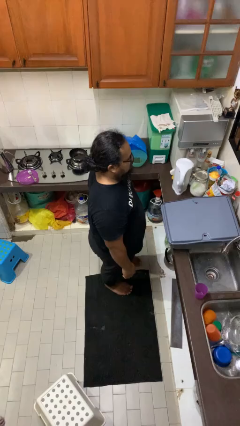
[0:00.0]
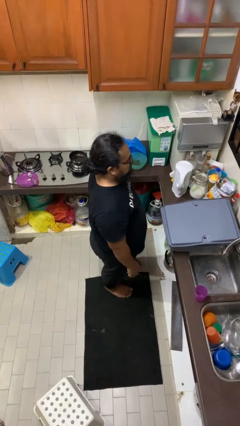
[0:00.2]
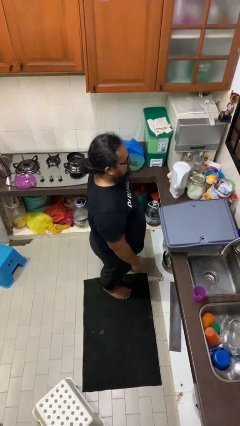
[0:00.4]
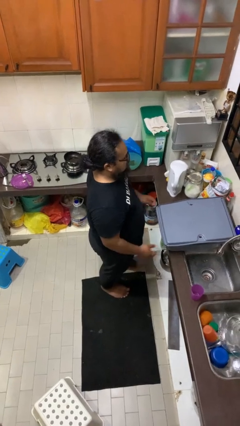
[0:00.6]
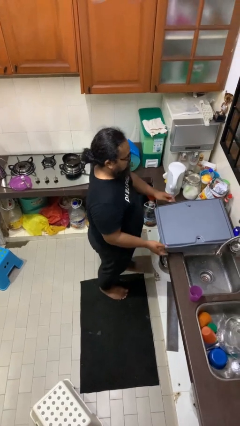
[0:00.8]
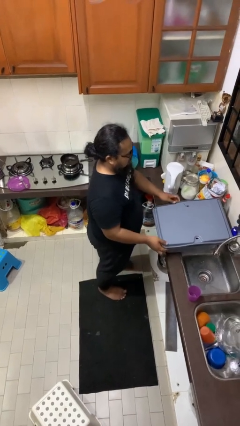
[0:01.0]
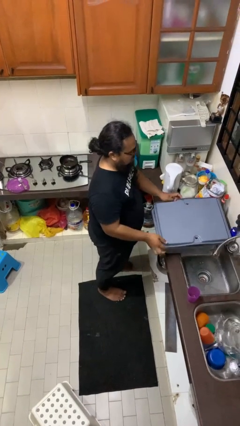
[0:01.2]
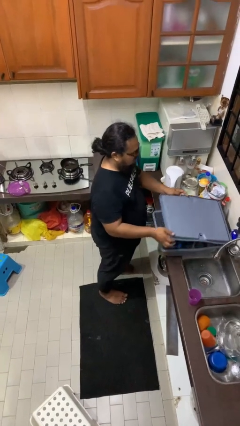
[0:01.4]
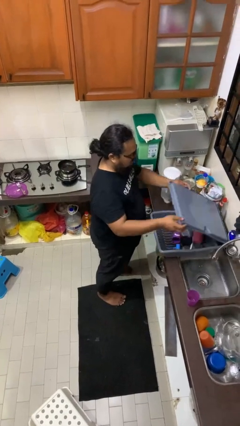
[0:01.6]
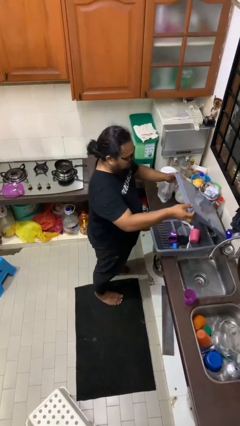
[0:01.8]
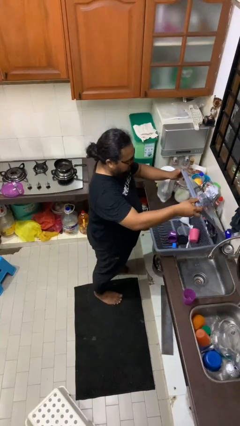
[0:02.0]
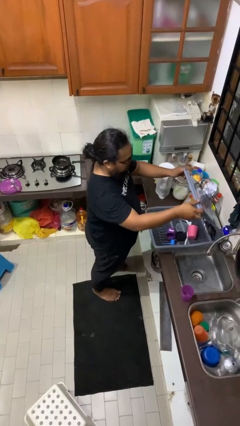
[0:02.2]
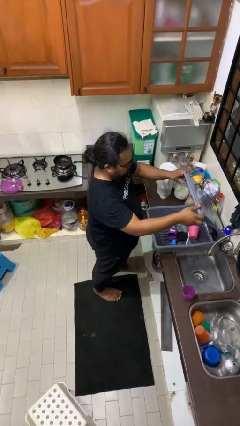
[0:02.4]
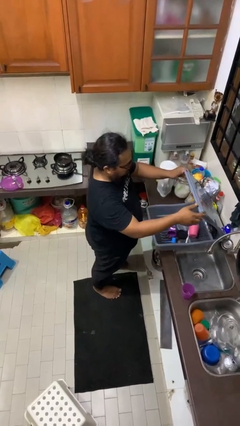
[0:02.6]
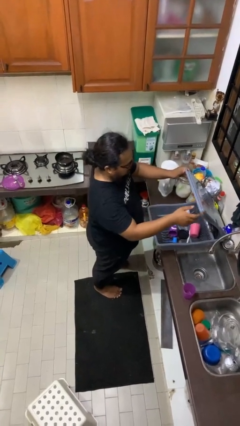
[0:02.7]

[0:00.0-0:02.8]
person opens dishwasher

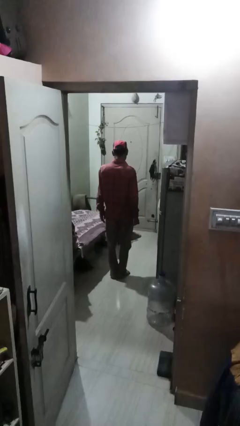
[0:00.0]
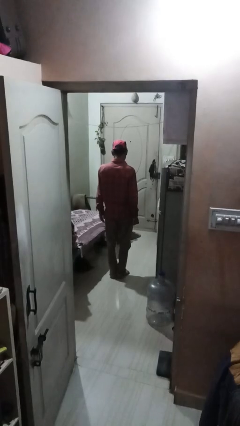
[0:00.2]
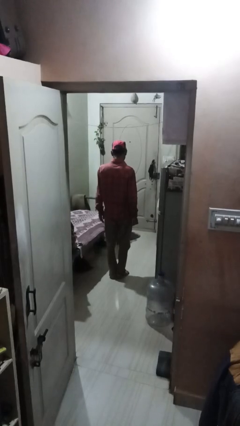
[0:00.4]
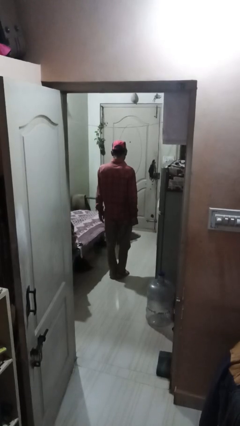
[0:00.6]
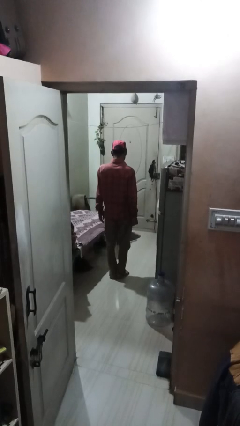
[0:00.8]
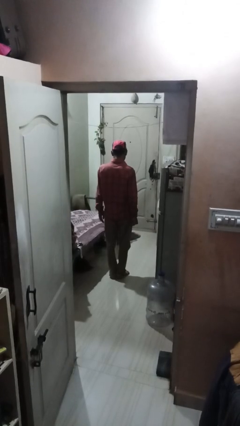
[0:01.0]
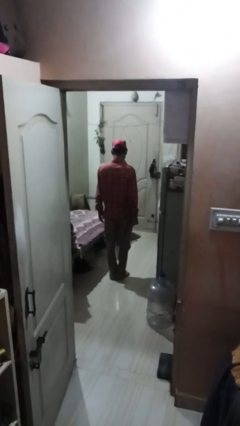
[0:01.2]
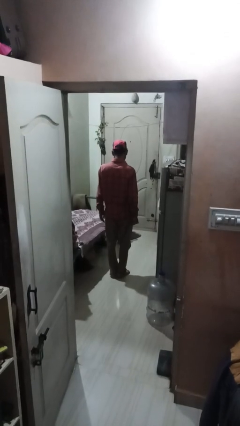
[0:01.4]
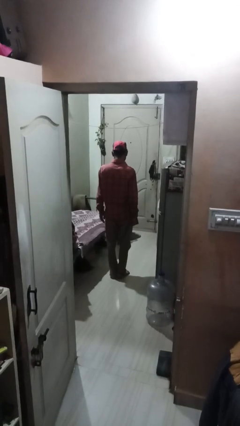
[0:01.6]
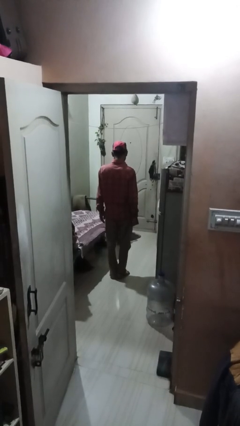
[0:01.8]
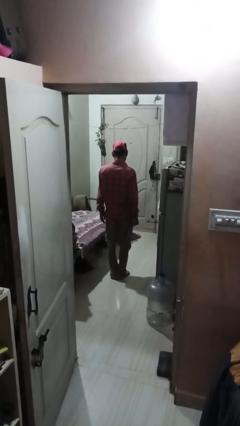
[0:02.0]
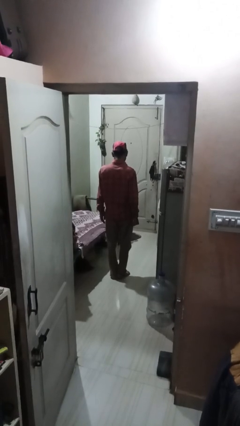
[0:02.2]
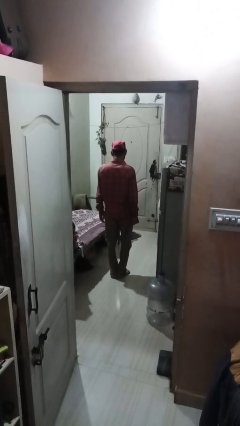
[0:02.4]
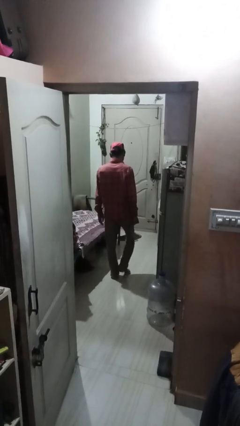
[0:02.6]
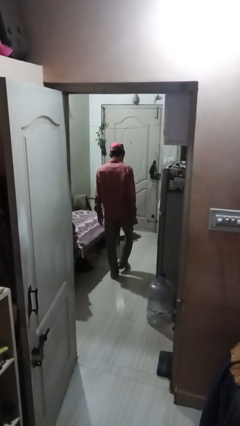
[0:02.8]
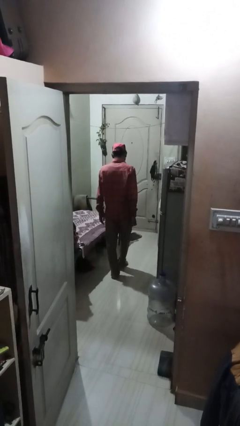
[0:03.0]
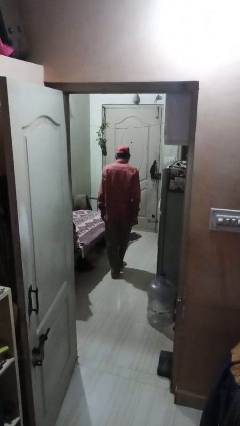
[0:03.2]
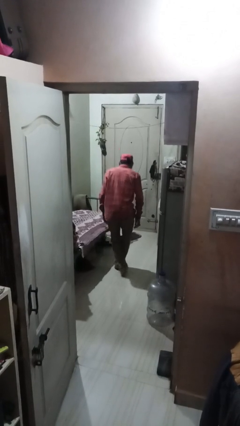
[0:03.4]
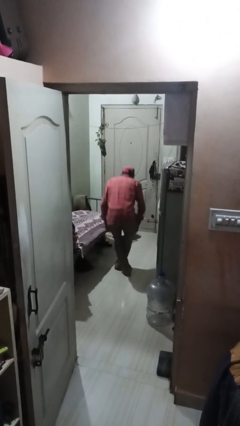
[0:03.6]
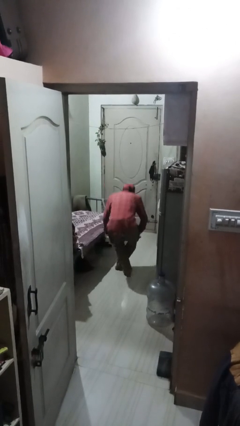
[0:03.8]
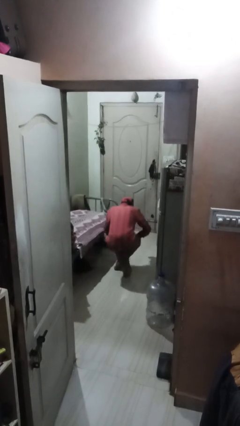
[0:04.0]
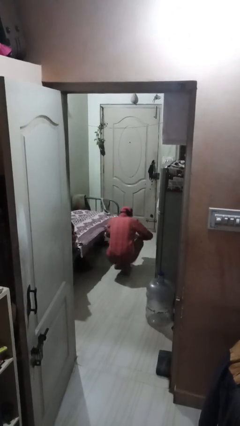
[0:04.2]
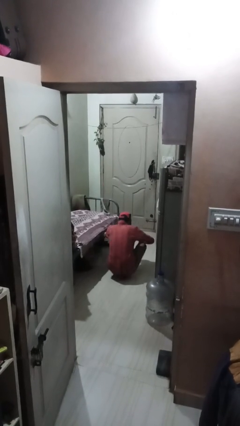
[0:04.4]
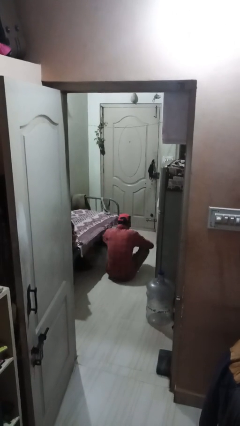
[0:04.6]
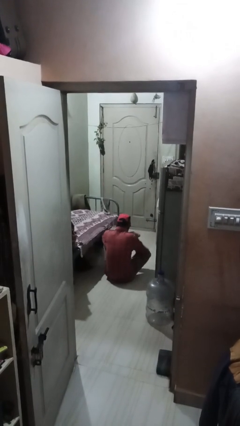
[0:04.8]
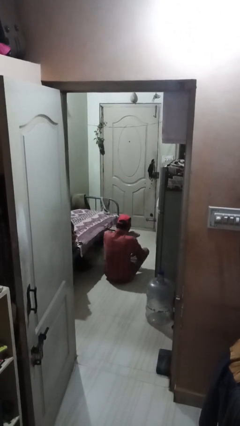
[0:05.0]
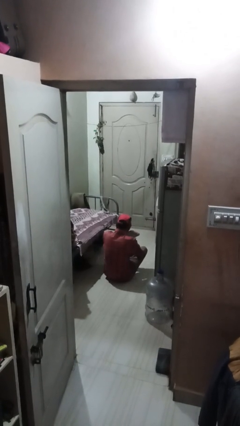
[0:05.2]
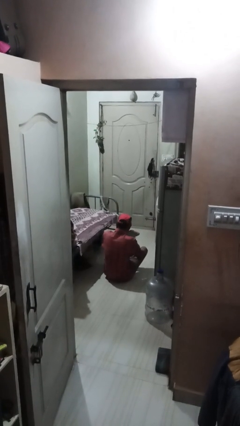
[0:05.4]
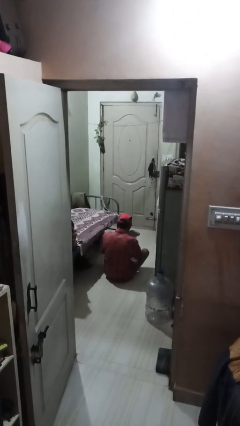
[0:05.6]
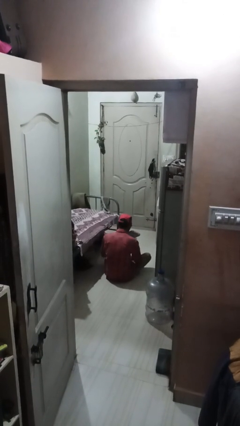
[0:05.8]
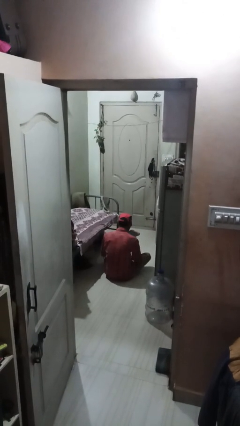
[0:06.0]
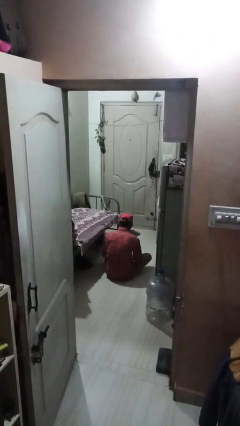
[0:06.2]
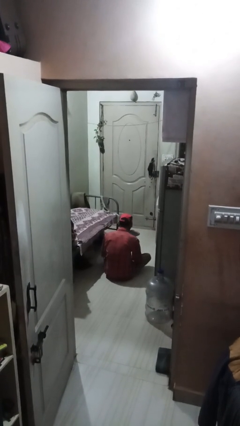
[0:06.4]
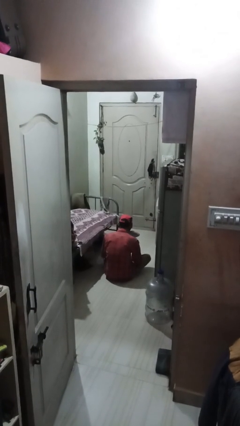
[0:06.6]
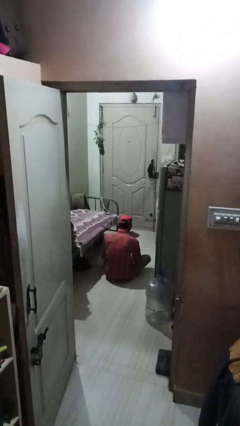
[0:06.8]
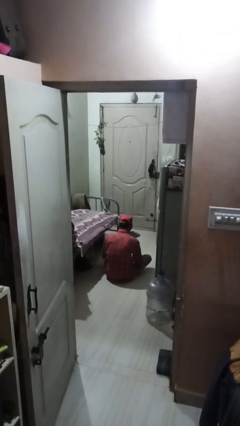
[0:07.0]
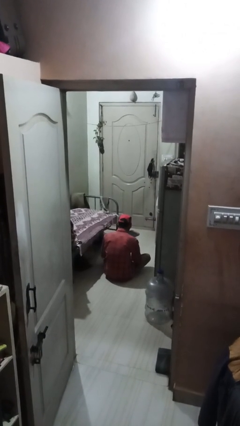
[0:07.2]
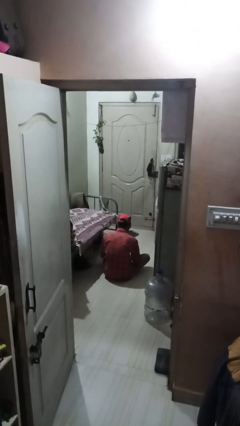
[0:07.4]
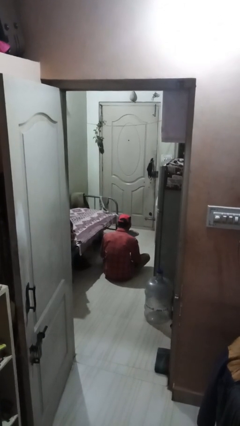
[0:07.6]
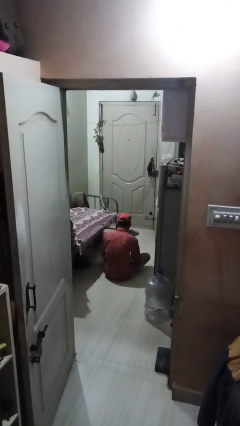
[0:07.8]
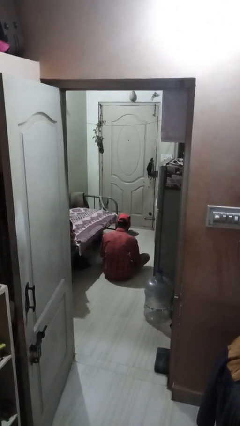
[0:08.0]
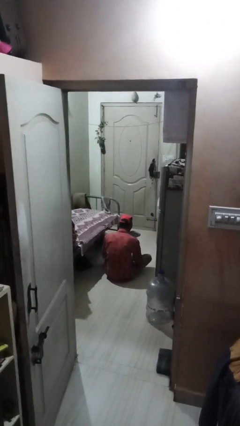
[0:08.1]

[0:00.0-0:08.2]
person sits crisscross

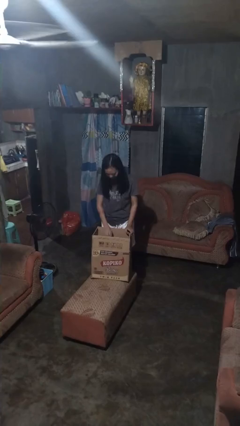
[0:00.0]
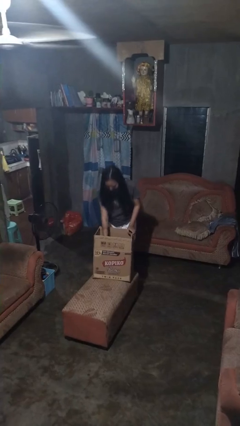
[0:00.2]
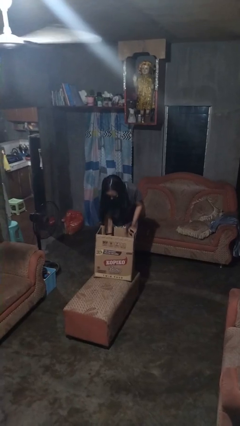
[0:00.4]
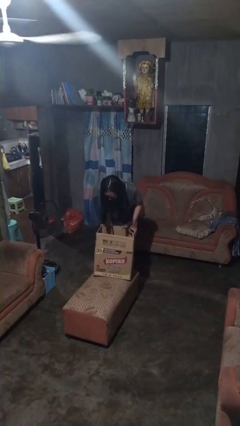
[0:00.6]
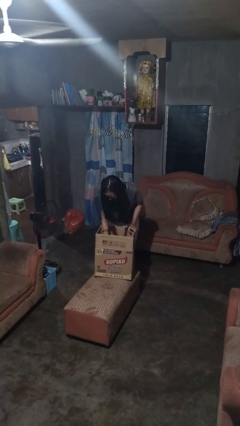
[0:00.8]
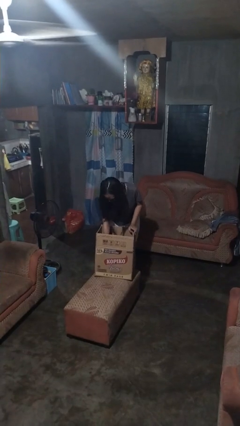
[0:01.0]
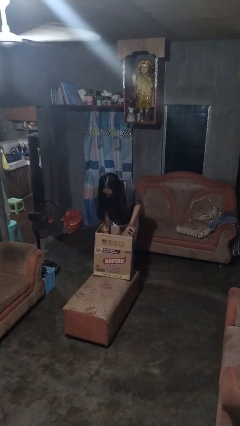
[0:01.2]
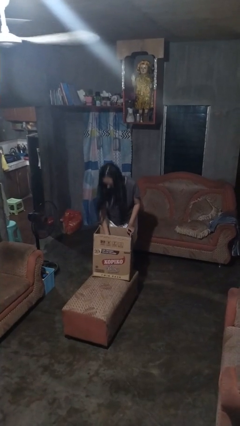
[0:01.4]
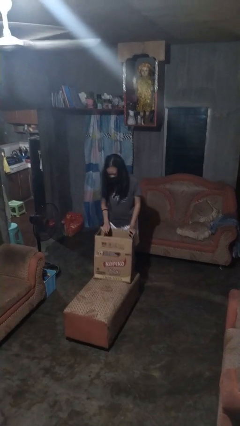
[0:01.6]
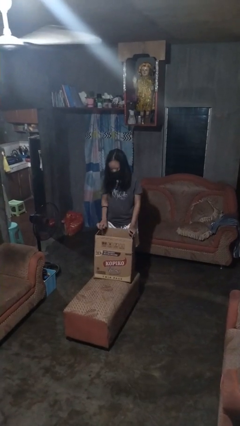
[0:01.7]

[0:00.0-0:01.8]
person searches in box

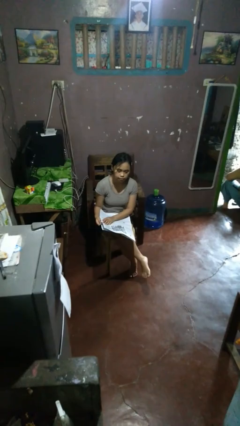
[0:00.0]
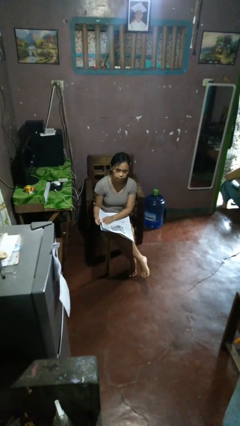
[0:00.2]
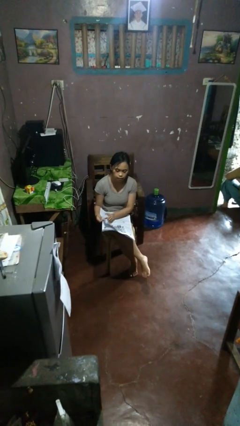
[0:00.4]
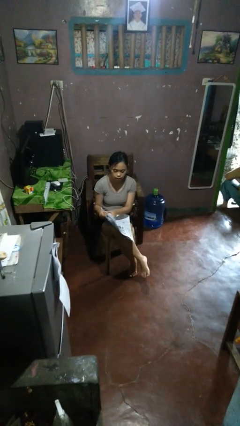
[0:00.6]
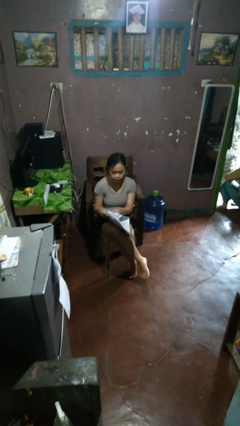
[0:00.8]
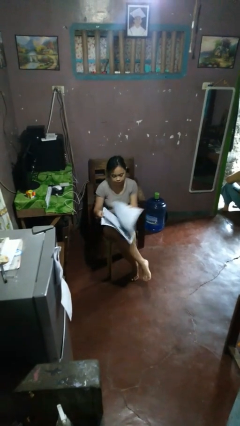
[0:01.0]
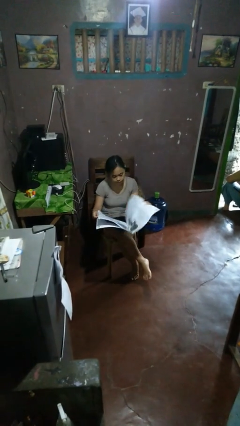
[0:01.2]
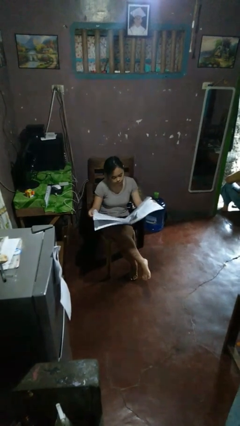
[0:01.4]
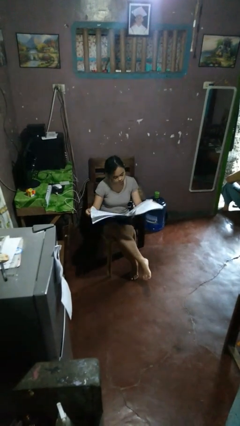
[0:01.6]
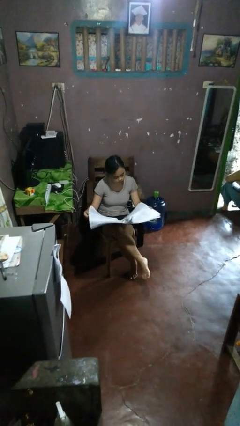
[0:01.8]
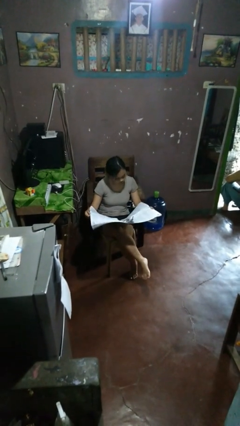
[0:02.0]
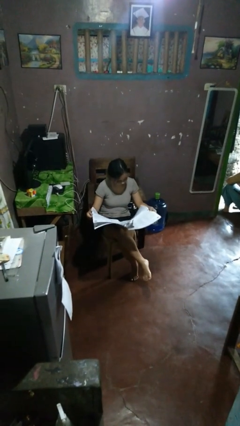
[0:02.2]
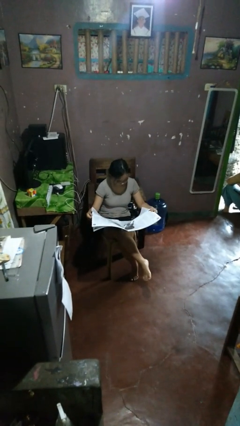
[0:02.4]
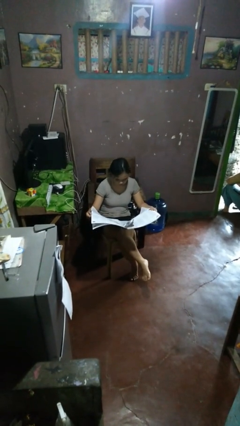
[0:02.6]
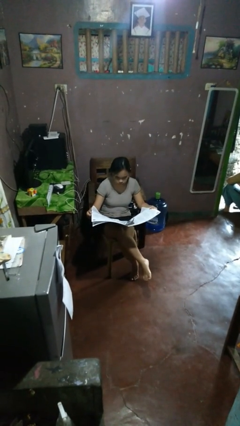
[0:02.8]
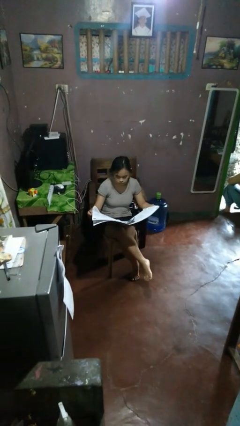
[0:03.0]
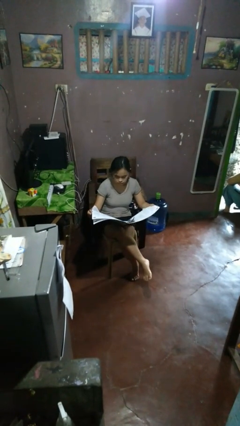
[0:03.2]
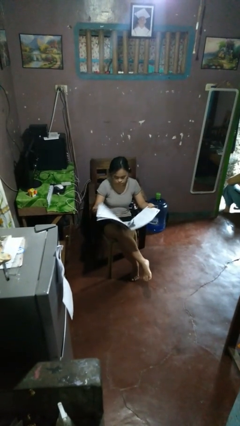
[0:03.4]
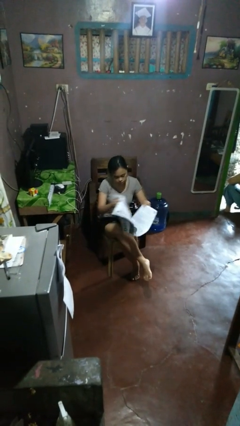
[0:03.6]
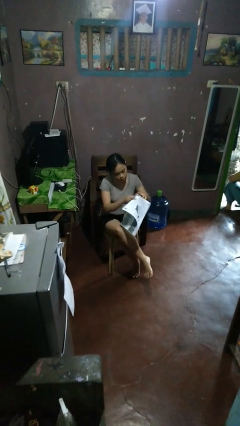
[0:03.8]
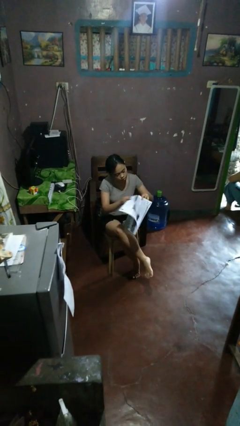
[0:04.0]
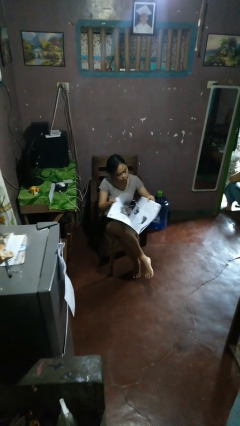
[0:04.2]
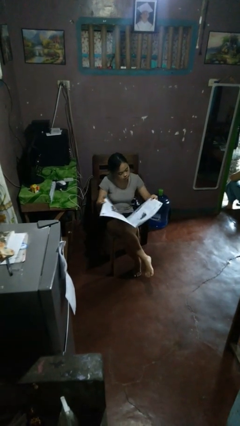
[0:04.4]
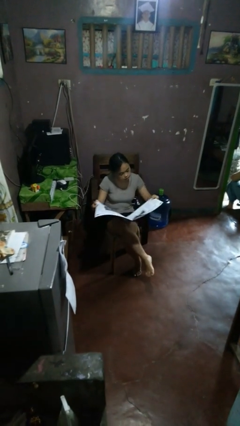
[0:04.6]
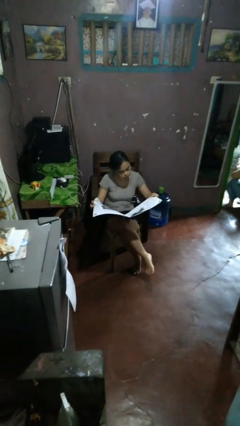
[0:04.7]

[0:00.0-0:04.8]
person reads newspaper

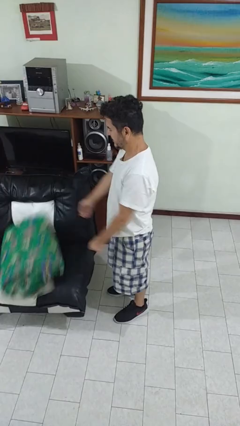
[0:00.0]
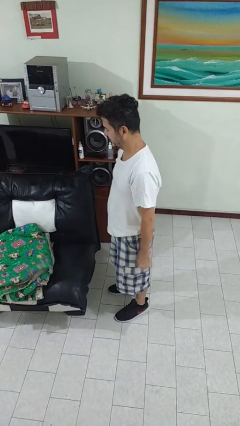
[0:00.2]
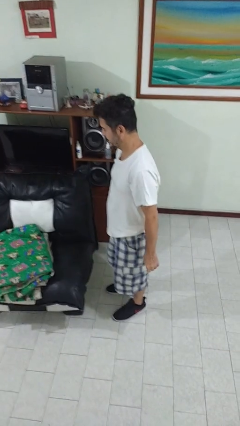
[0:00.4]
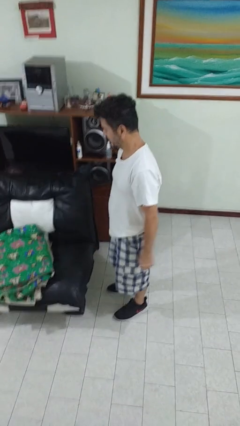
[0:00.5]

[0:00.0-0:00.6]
person puts down object on couch
